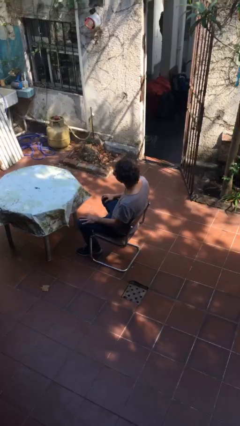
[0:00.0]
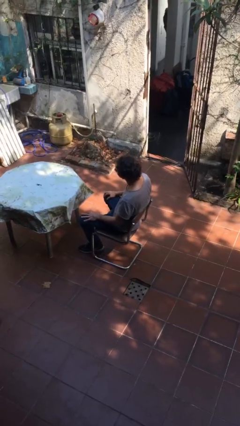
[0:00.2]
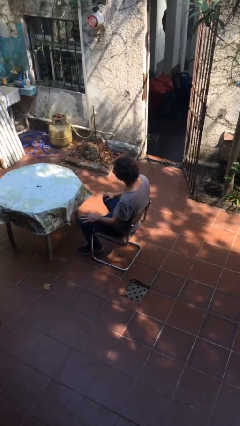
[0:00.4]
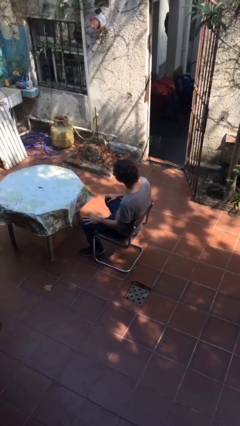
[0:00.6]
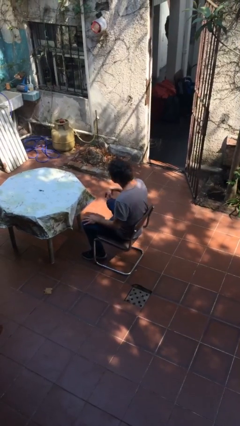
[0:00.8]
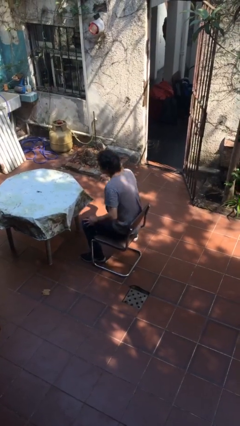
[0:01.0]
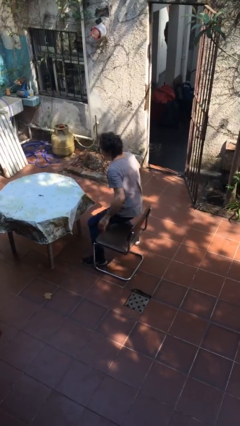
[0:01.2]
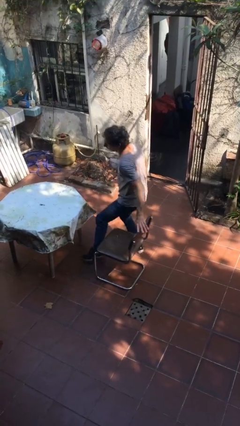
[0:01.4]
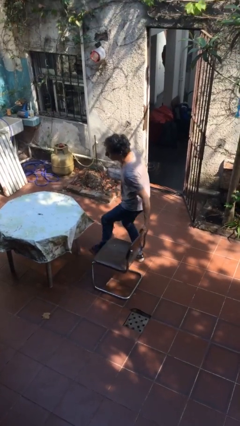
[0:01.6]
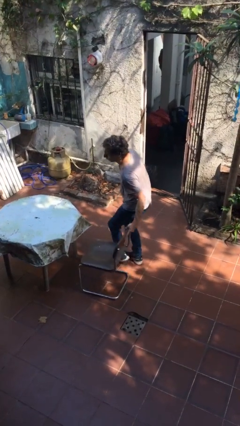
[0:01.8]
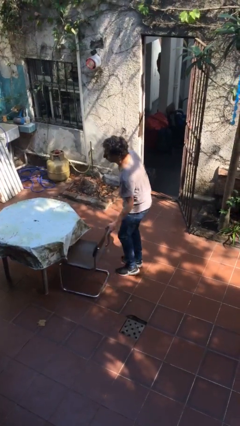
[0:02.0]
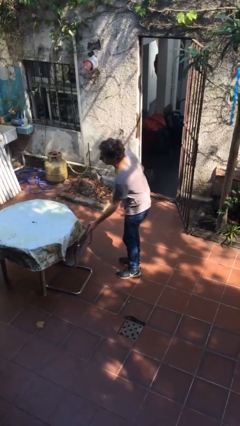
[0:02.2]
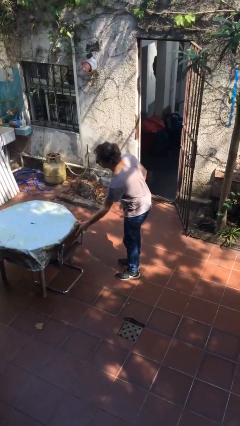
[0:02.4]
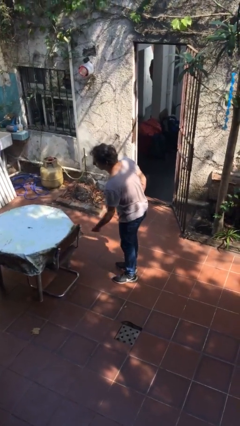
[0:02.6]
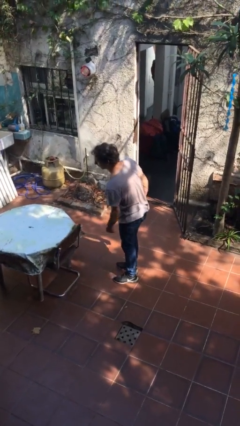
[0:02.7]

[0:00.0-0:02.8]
person stands up

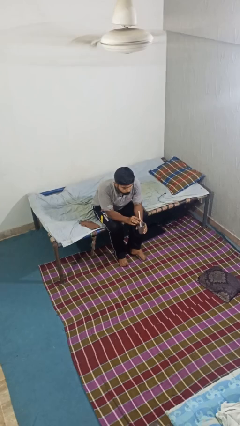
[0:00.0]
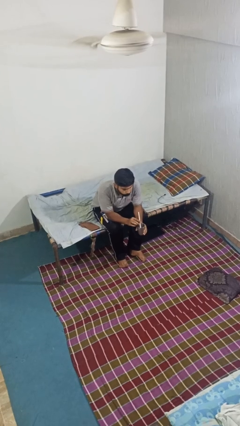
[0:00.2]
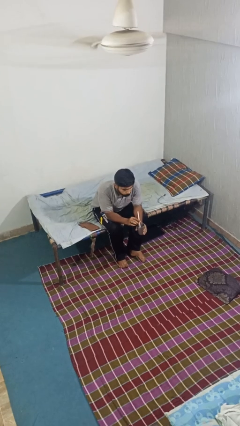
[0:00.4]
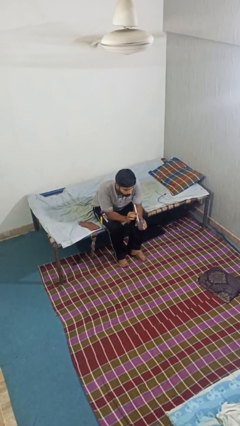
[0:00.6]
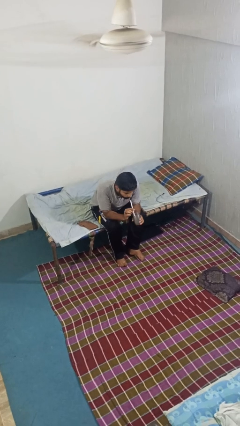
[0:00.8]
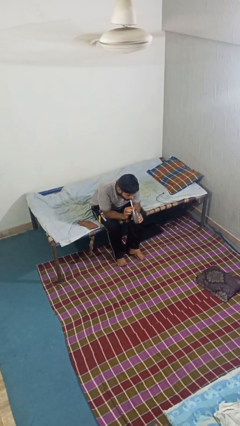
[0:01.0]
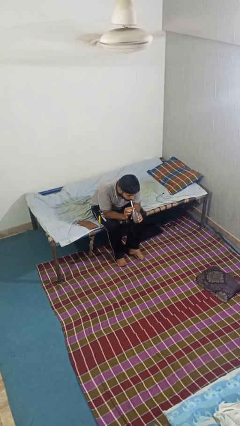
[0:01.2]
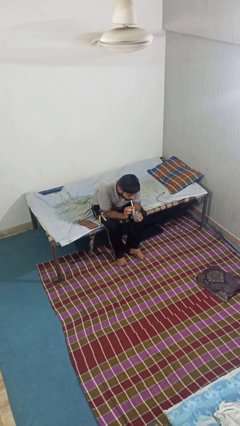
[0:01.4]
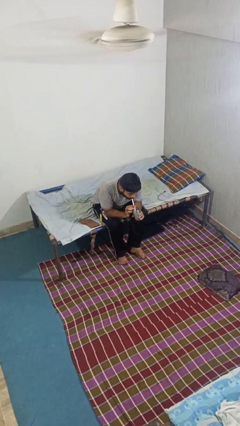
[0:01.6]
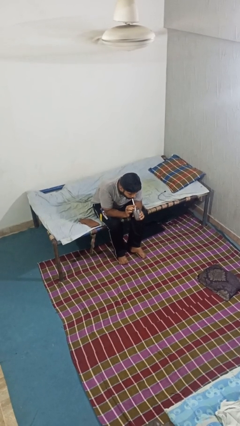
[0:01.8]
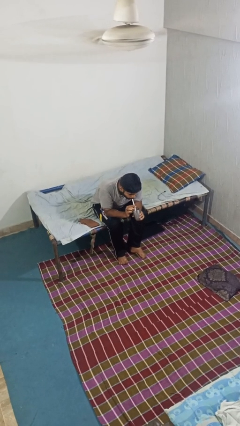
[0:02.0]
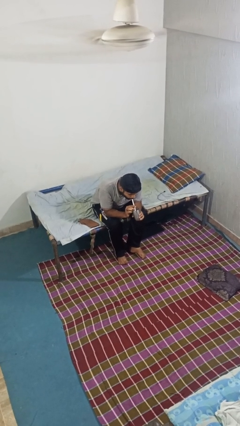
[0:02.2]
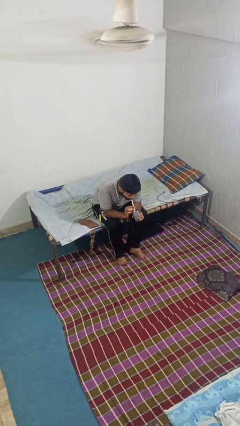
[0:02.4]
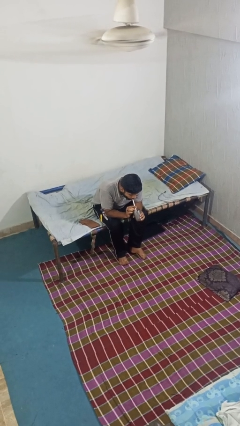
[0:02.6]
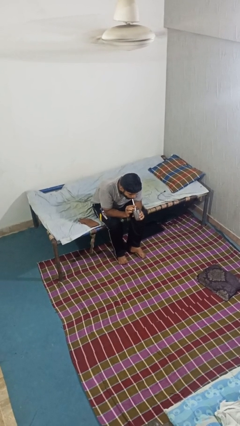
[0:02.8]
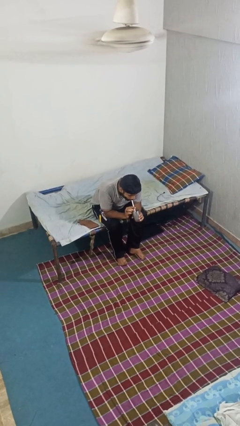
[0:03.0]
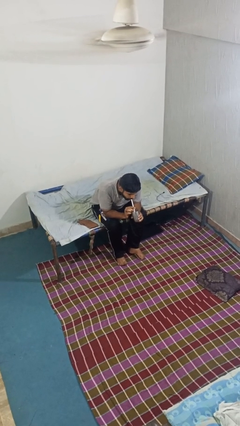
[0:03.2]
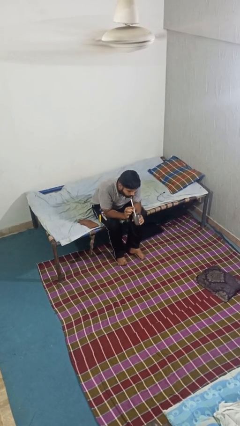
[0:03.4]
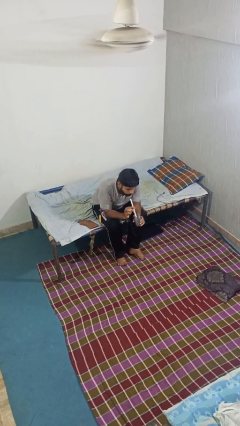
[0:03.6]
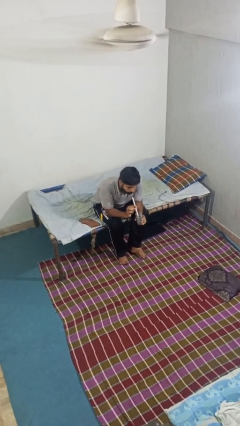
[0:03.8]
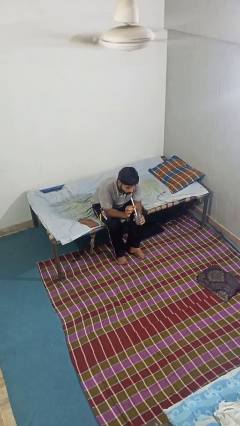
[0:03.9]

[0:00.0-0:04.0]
person drinks from straw

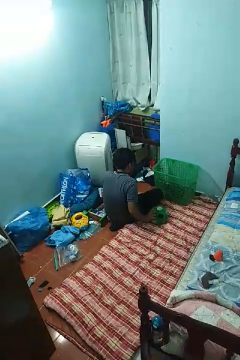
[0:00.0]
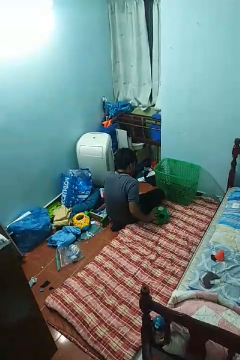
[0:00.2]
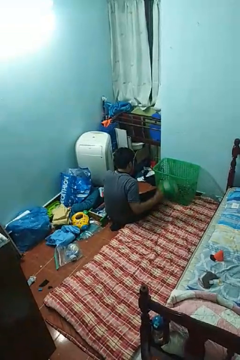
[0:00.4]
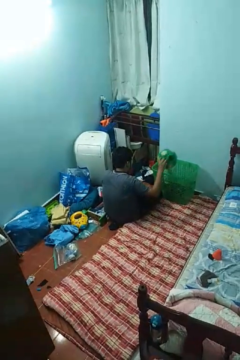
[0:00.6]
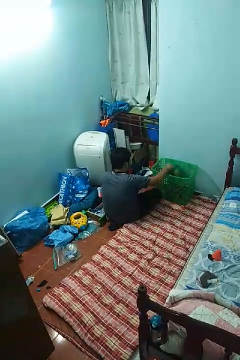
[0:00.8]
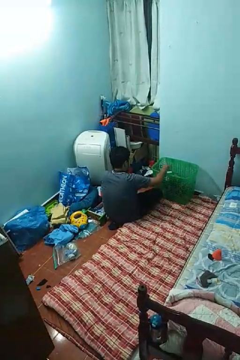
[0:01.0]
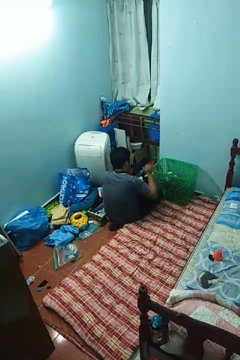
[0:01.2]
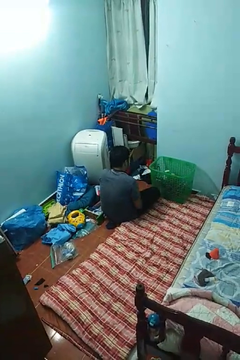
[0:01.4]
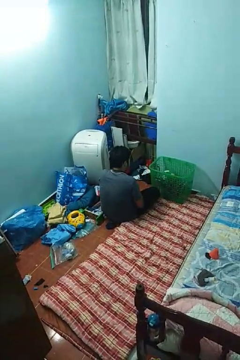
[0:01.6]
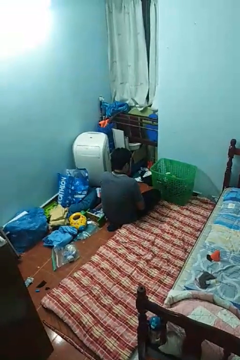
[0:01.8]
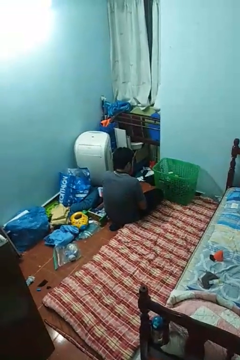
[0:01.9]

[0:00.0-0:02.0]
person puts object into basket

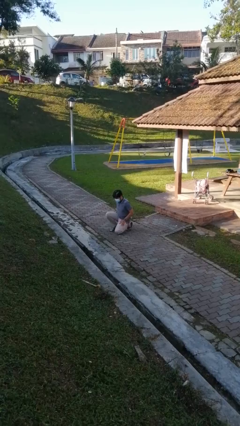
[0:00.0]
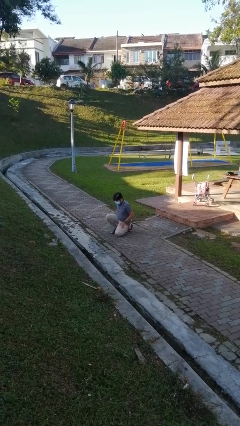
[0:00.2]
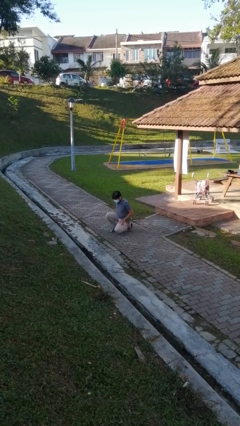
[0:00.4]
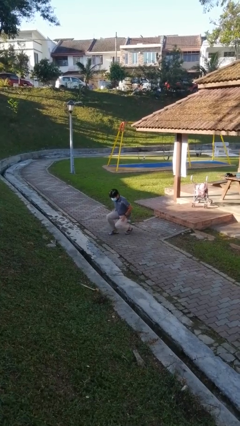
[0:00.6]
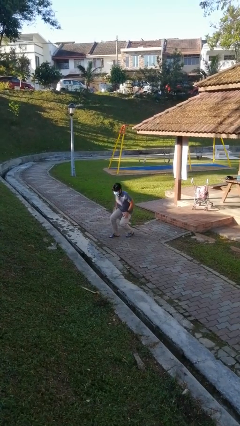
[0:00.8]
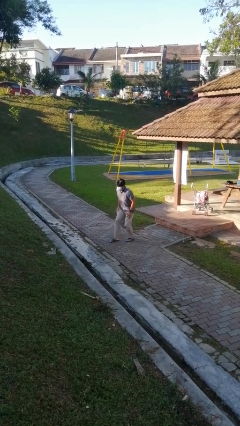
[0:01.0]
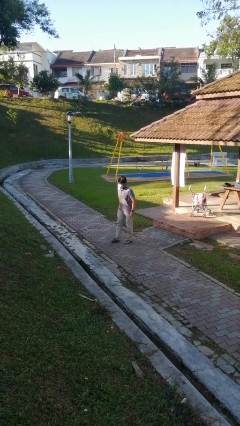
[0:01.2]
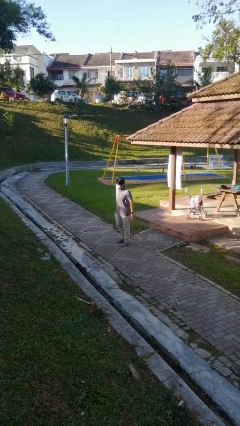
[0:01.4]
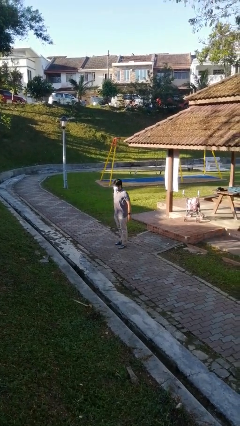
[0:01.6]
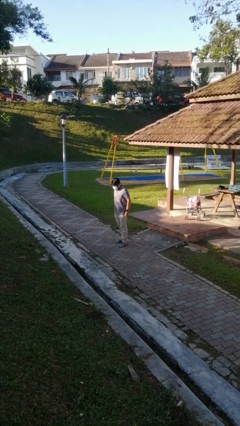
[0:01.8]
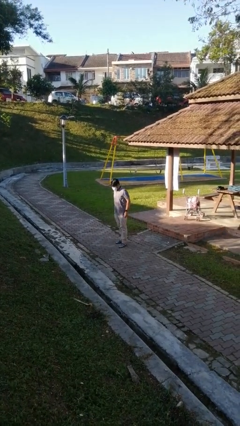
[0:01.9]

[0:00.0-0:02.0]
person stands up from floor

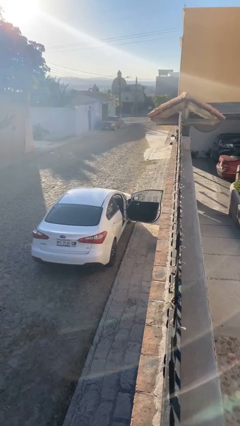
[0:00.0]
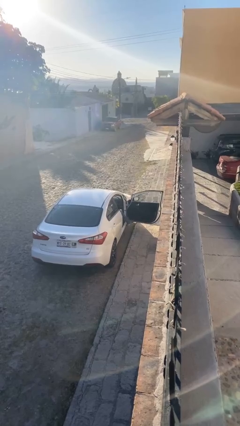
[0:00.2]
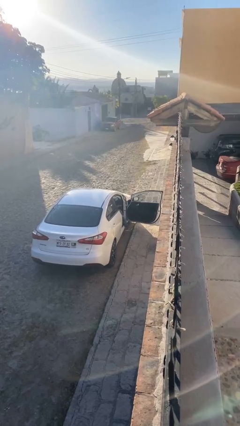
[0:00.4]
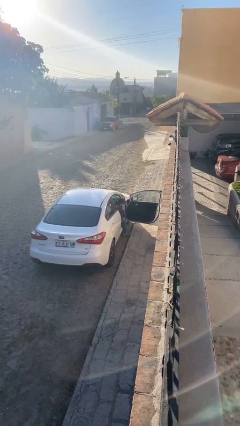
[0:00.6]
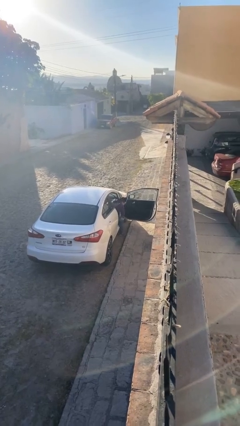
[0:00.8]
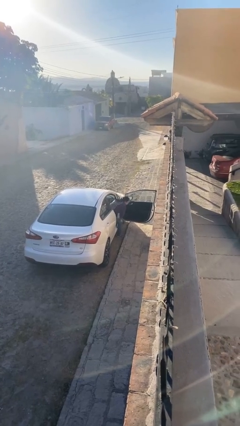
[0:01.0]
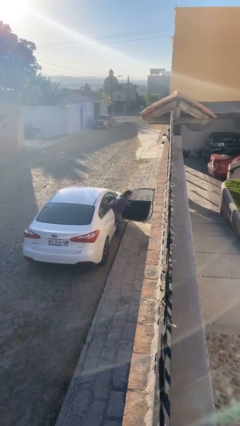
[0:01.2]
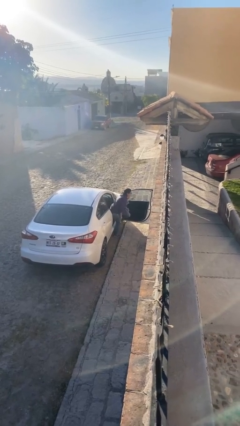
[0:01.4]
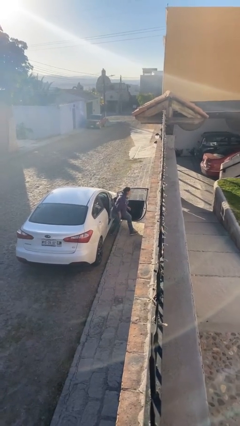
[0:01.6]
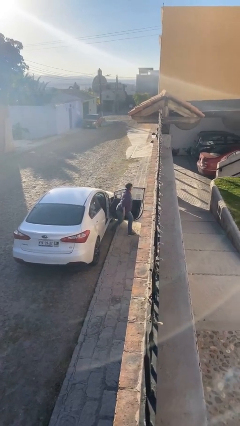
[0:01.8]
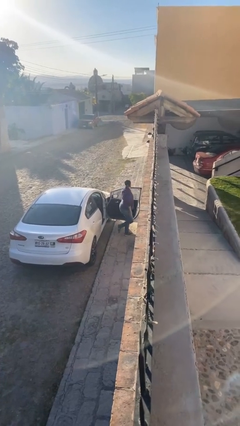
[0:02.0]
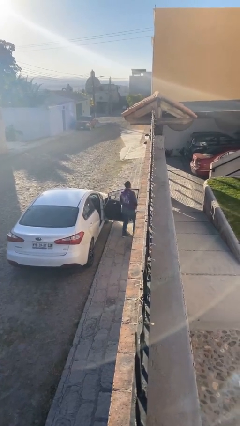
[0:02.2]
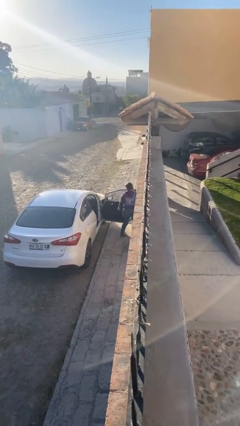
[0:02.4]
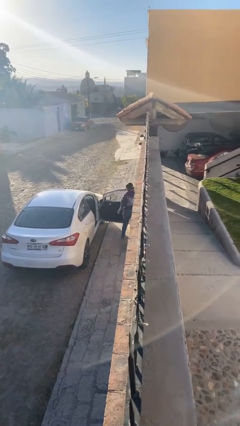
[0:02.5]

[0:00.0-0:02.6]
person exits car

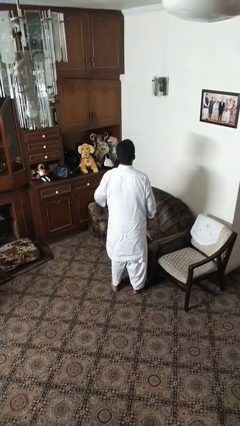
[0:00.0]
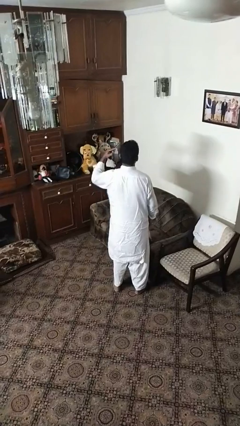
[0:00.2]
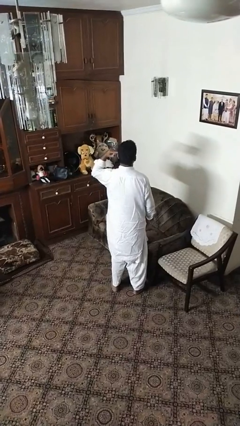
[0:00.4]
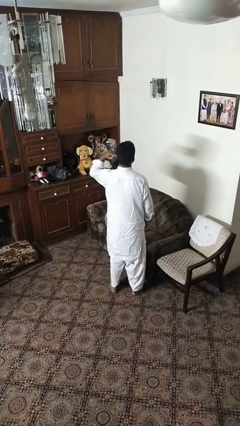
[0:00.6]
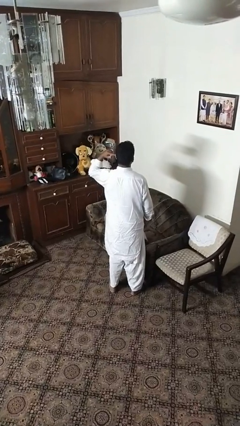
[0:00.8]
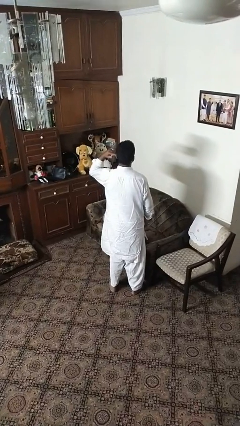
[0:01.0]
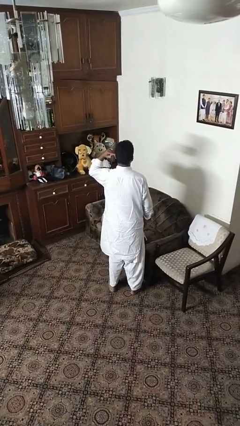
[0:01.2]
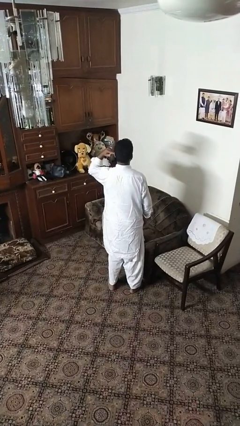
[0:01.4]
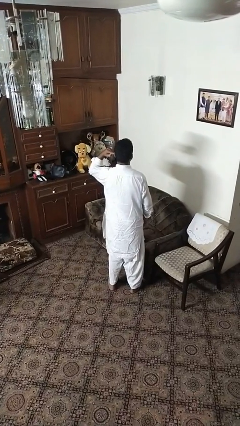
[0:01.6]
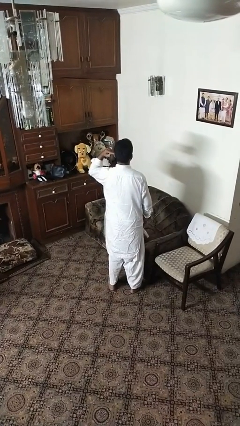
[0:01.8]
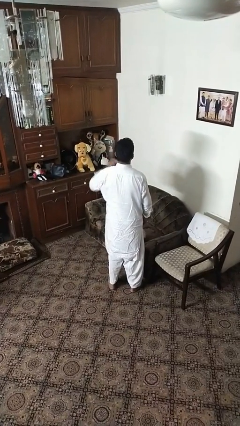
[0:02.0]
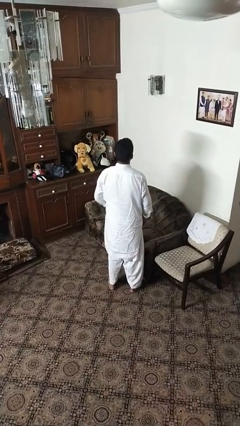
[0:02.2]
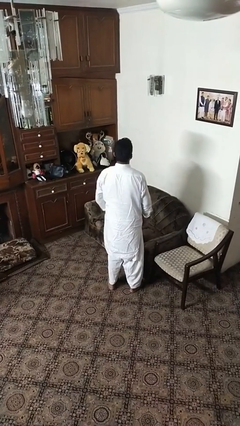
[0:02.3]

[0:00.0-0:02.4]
person gestures listen closely

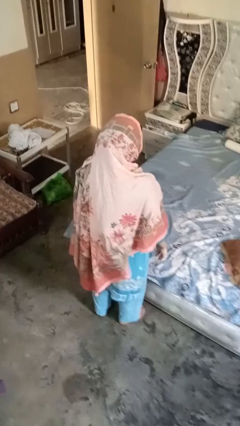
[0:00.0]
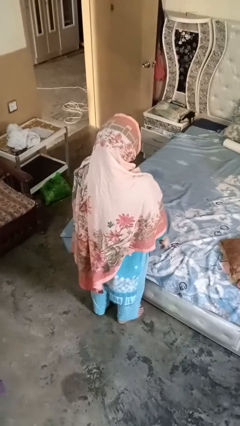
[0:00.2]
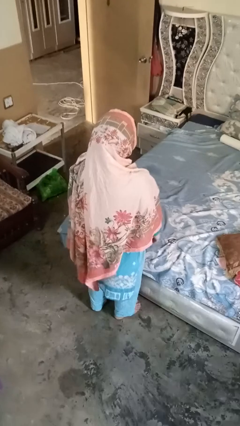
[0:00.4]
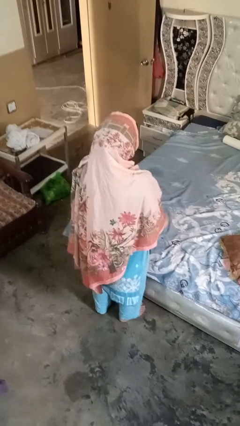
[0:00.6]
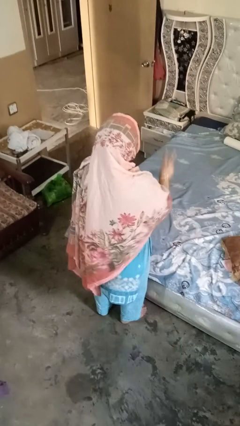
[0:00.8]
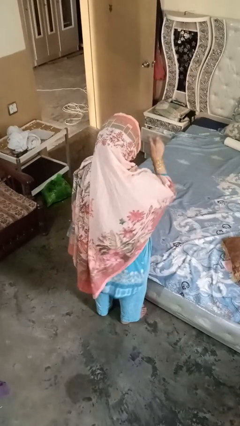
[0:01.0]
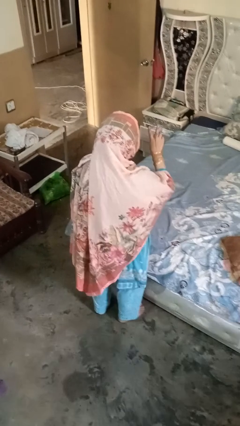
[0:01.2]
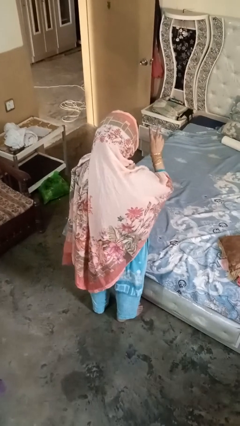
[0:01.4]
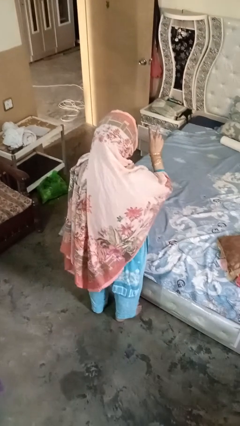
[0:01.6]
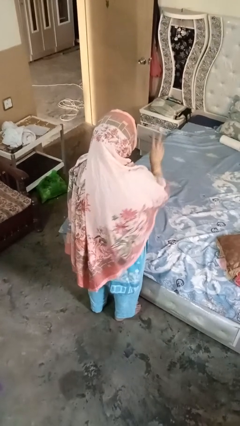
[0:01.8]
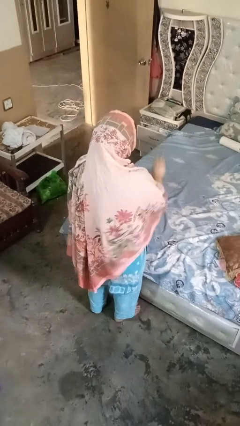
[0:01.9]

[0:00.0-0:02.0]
person gestures be quiet
